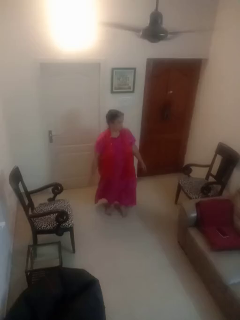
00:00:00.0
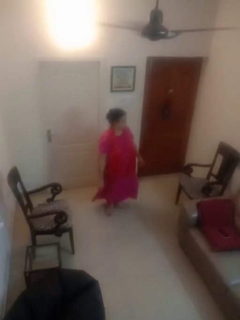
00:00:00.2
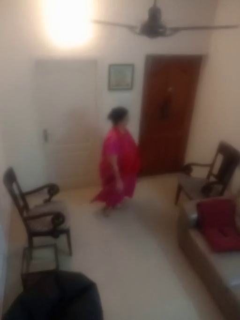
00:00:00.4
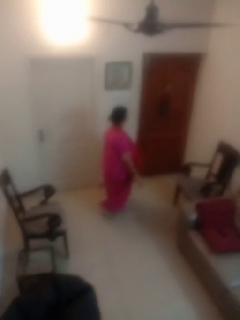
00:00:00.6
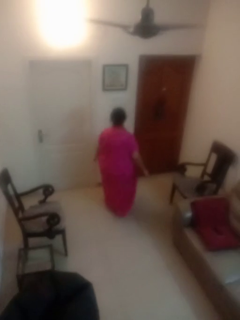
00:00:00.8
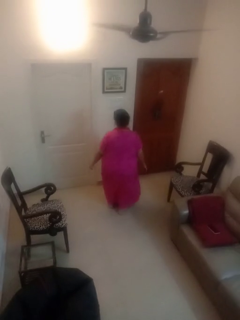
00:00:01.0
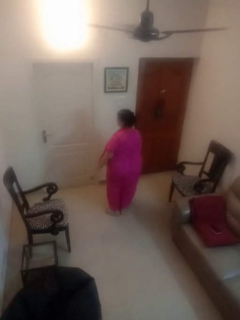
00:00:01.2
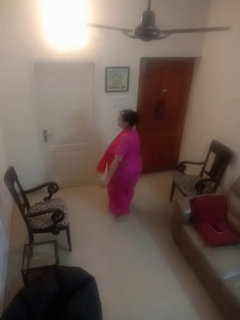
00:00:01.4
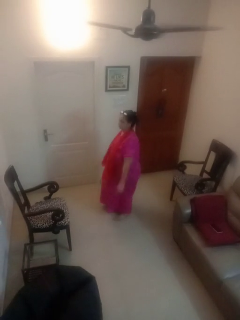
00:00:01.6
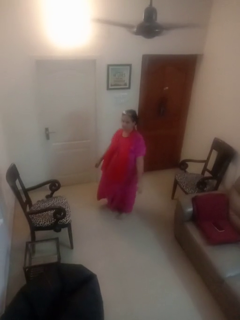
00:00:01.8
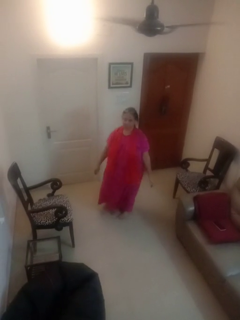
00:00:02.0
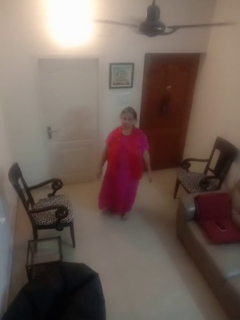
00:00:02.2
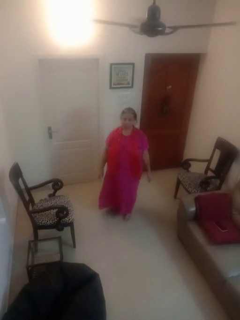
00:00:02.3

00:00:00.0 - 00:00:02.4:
person twirls

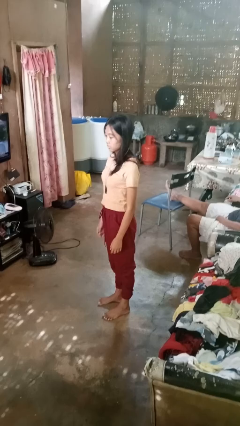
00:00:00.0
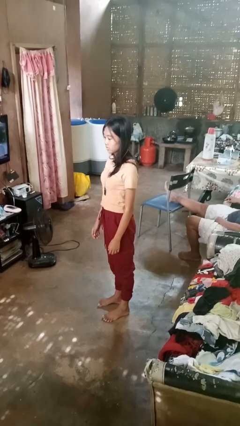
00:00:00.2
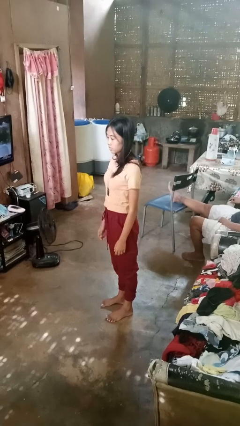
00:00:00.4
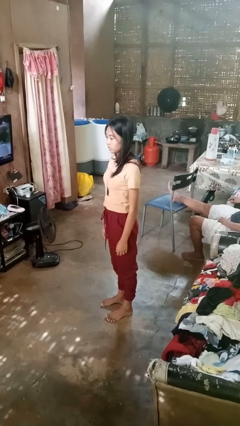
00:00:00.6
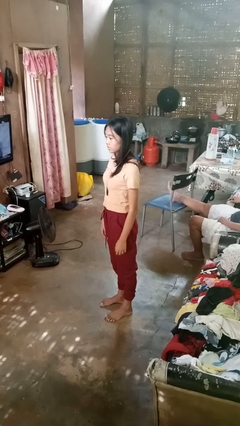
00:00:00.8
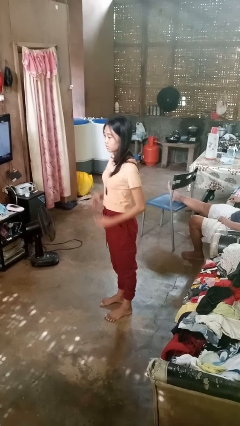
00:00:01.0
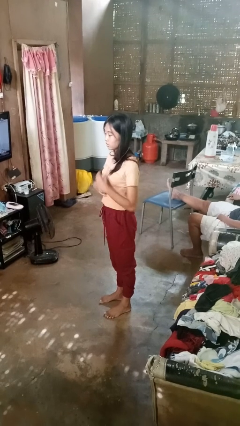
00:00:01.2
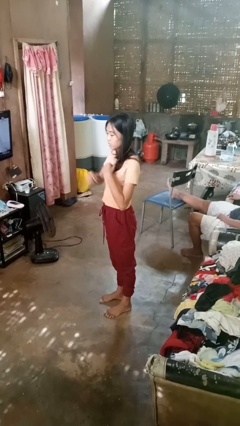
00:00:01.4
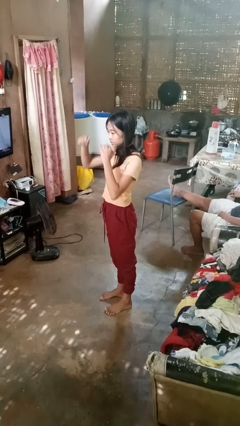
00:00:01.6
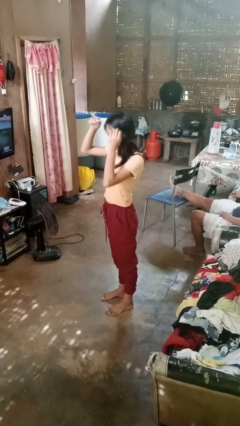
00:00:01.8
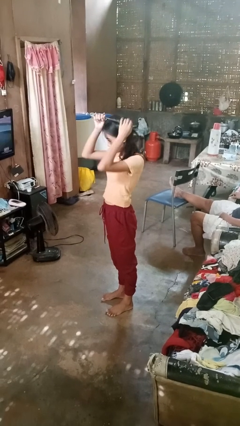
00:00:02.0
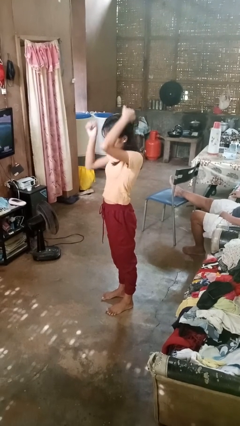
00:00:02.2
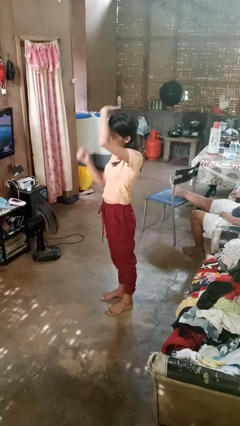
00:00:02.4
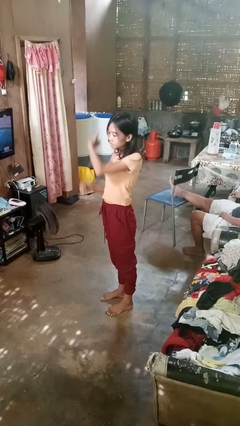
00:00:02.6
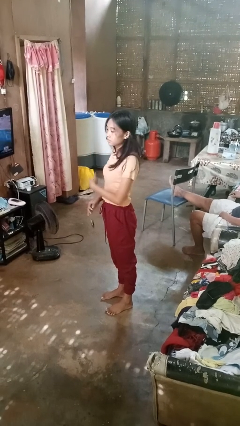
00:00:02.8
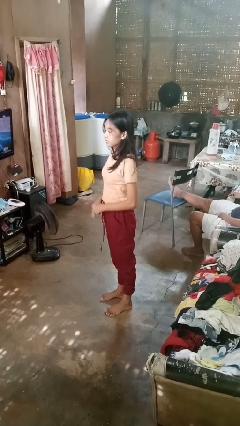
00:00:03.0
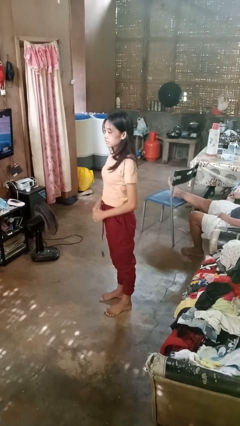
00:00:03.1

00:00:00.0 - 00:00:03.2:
person takes off belt

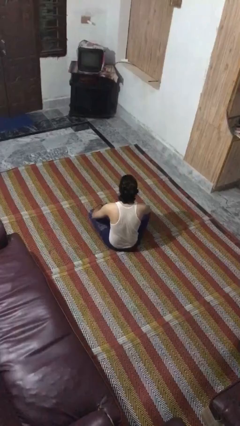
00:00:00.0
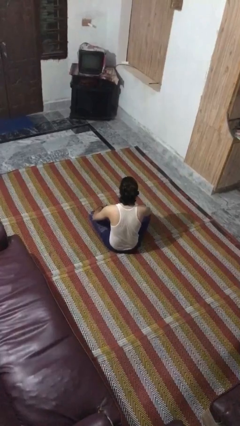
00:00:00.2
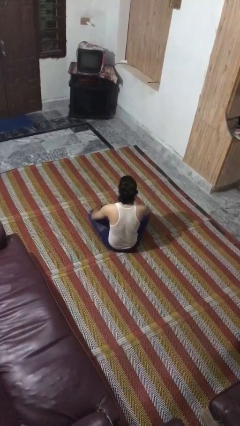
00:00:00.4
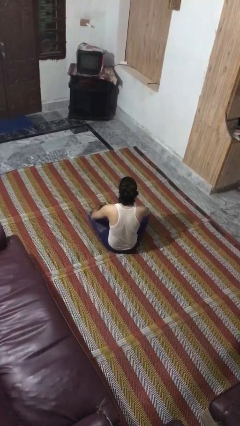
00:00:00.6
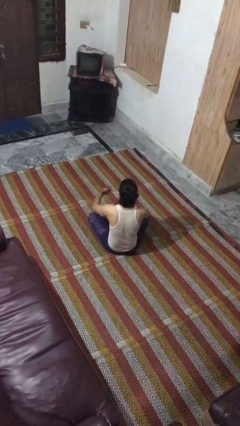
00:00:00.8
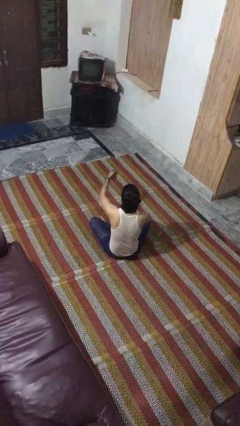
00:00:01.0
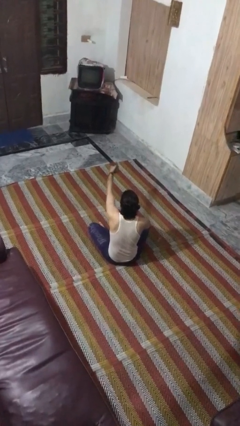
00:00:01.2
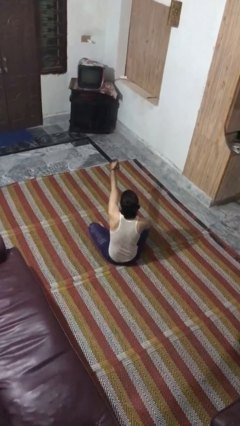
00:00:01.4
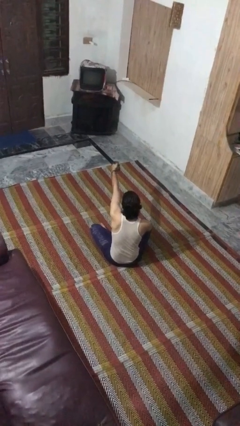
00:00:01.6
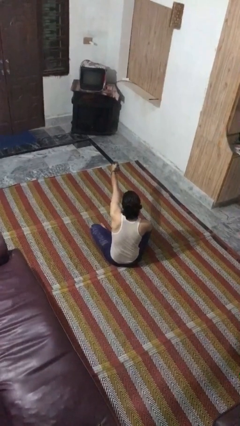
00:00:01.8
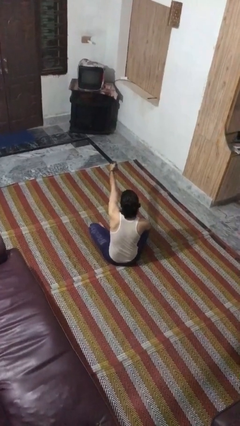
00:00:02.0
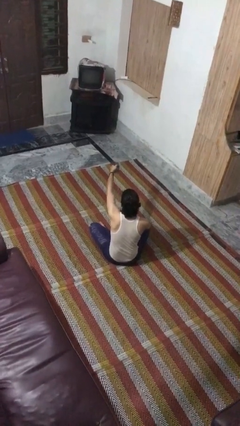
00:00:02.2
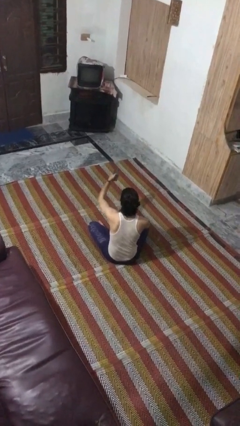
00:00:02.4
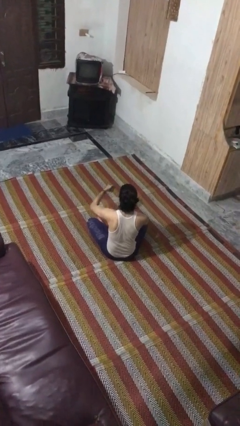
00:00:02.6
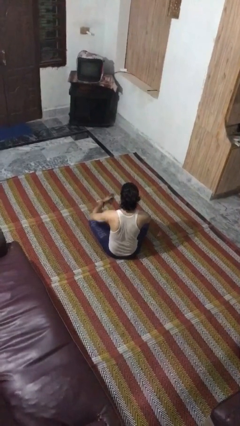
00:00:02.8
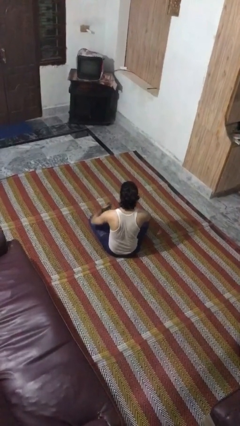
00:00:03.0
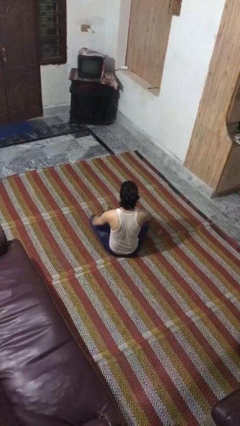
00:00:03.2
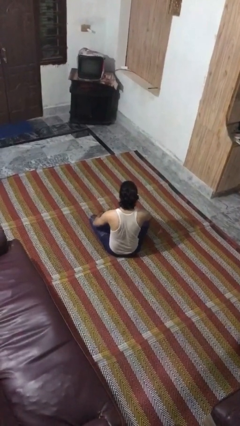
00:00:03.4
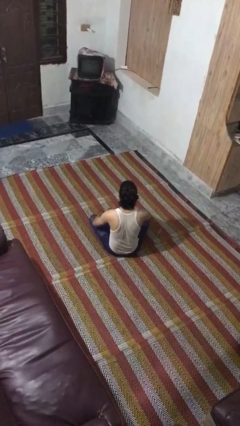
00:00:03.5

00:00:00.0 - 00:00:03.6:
person uses television remote

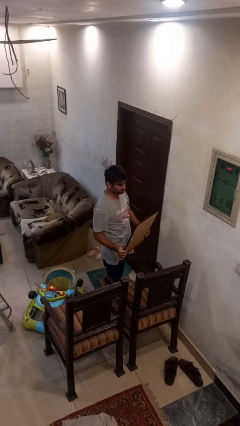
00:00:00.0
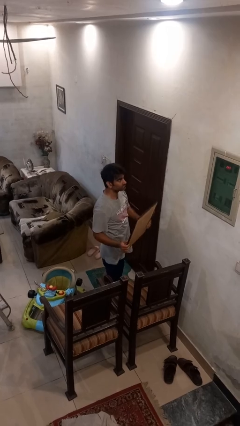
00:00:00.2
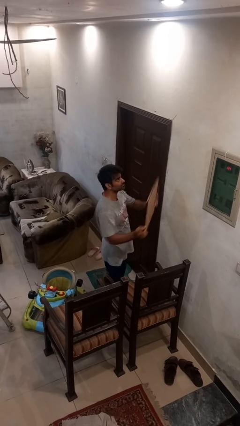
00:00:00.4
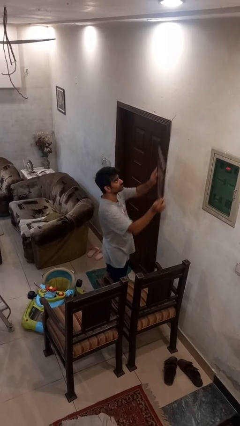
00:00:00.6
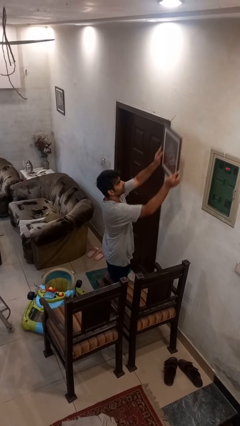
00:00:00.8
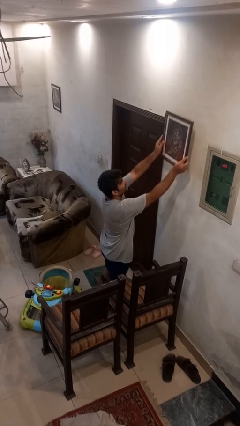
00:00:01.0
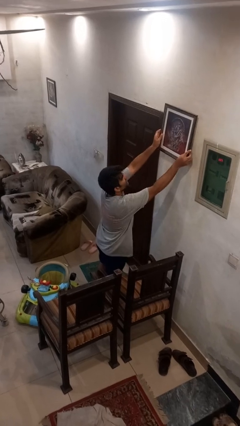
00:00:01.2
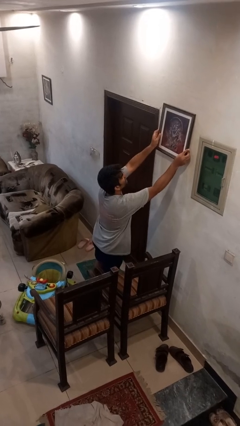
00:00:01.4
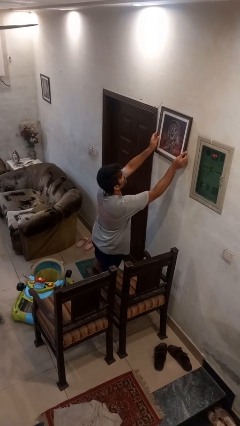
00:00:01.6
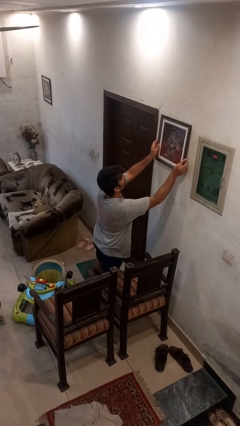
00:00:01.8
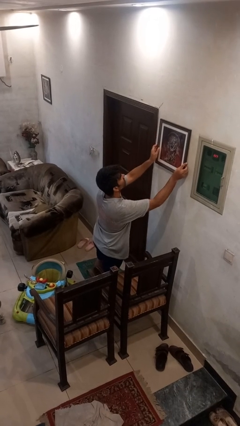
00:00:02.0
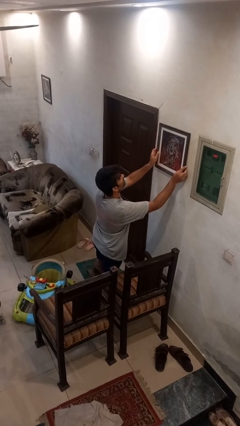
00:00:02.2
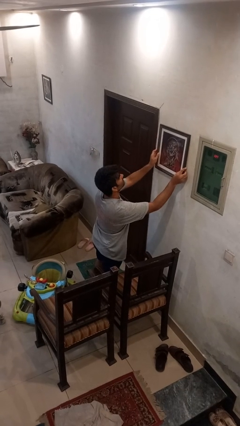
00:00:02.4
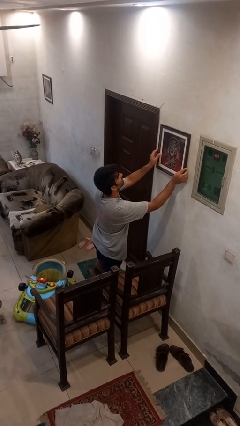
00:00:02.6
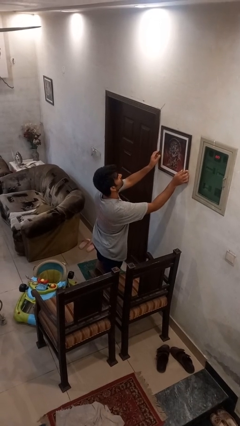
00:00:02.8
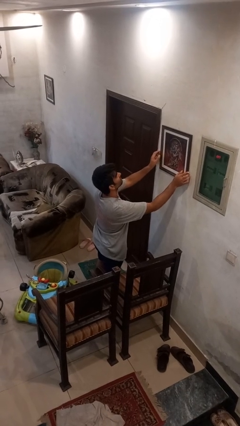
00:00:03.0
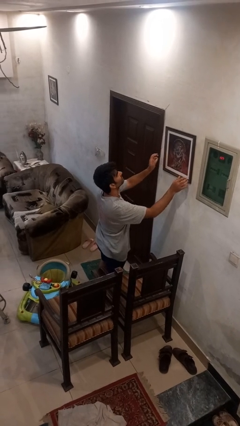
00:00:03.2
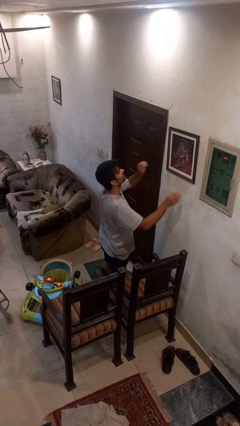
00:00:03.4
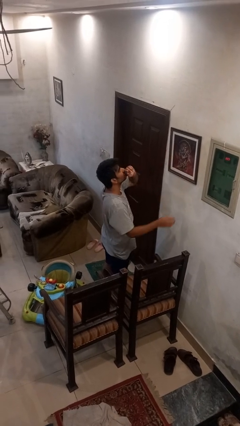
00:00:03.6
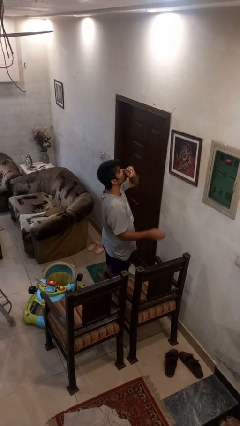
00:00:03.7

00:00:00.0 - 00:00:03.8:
person puts up picture frame

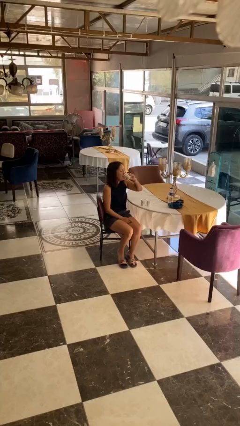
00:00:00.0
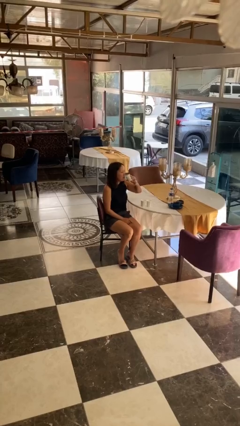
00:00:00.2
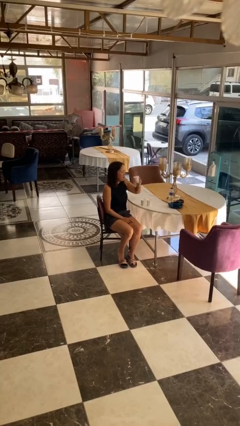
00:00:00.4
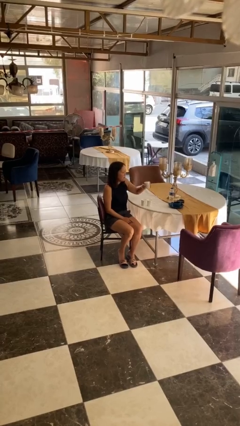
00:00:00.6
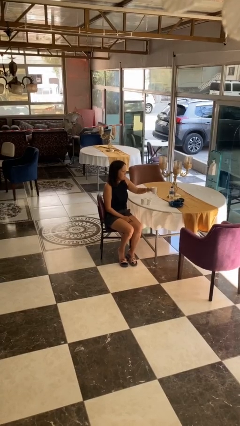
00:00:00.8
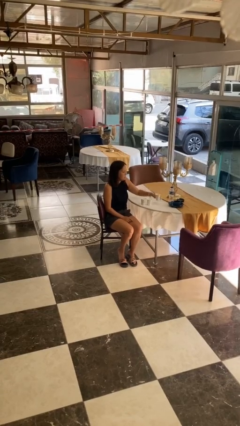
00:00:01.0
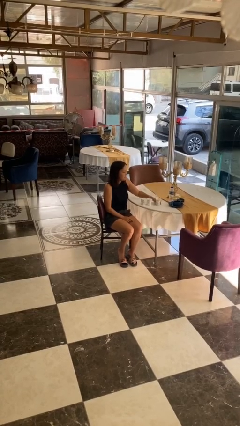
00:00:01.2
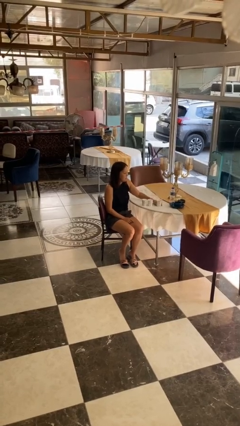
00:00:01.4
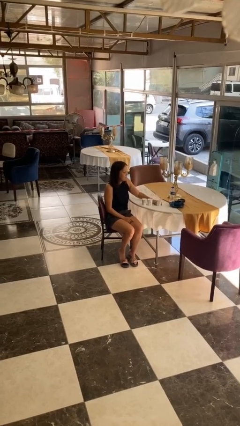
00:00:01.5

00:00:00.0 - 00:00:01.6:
person puts down object on table

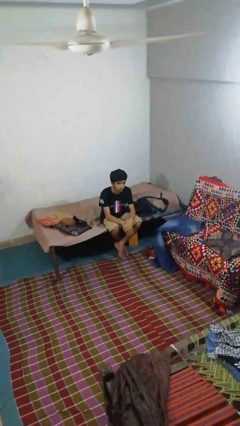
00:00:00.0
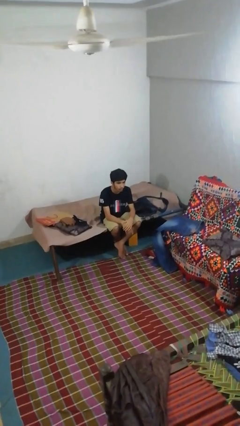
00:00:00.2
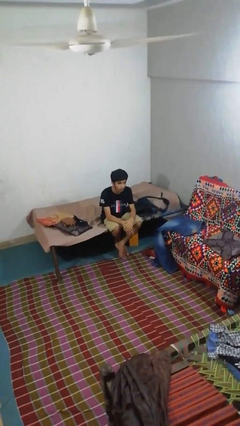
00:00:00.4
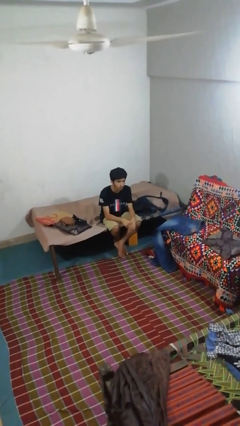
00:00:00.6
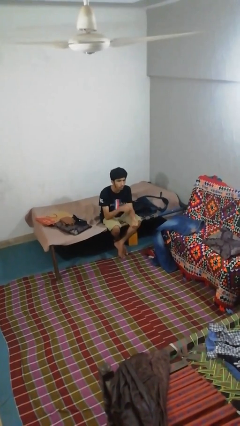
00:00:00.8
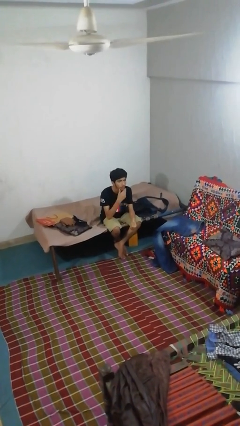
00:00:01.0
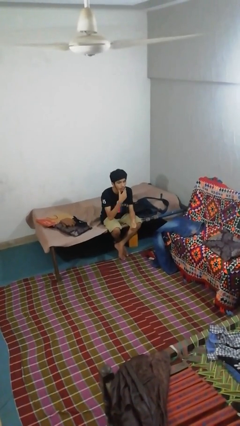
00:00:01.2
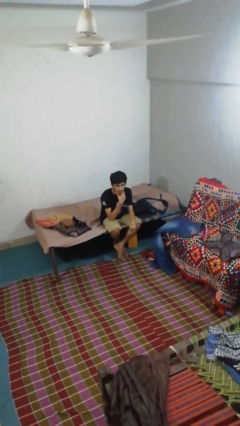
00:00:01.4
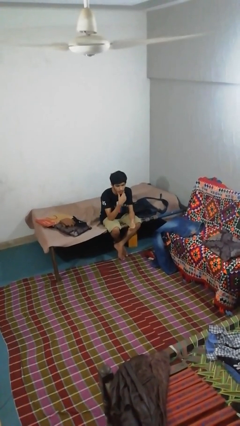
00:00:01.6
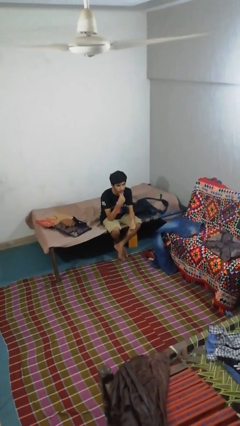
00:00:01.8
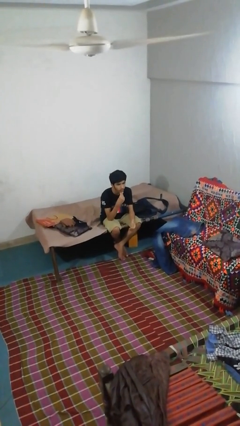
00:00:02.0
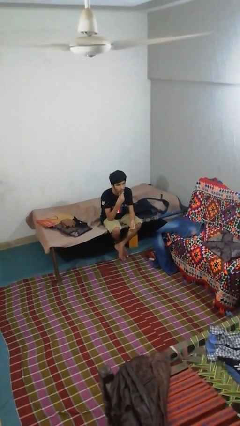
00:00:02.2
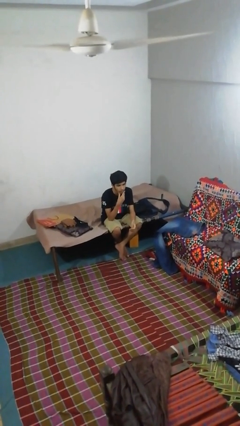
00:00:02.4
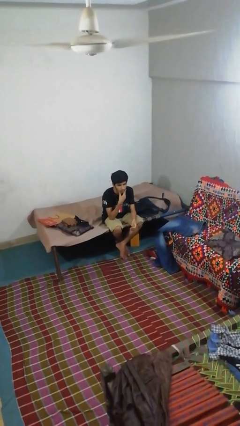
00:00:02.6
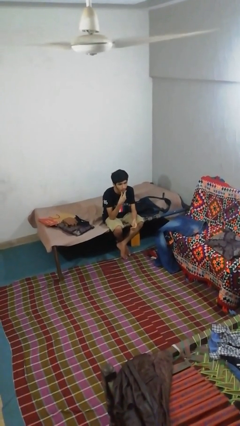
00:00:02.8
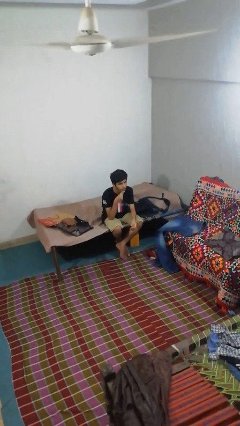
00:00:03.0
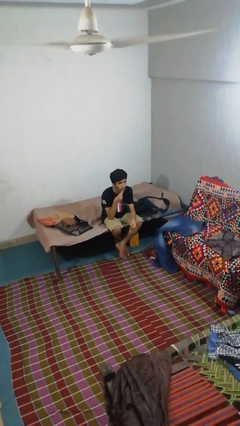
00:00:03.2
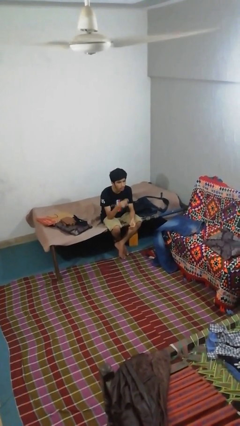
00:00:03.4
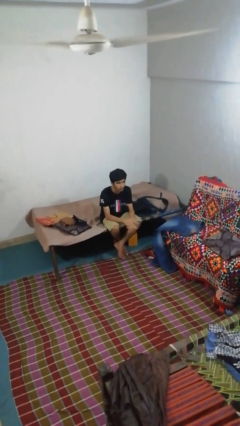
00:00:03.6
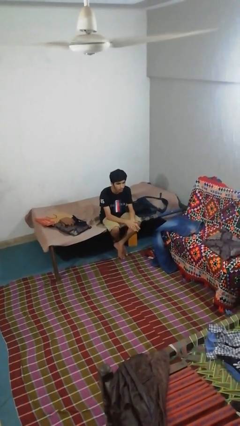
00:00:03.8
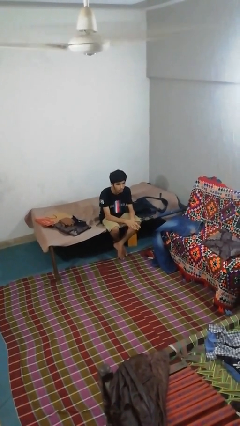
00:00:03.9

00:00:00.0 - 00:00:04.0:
person strokes chin
